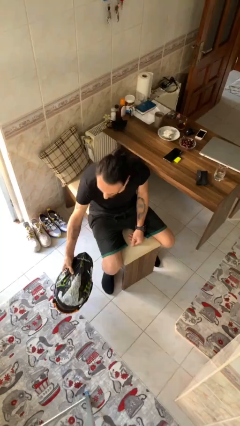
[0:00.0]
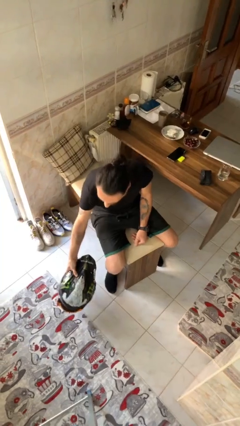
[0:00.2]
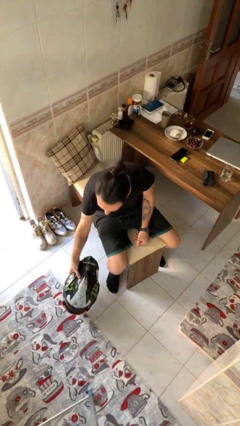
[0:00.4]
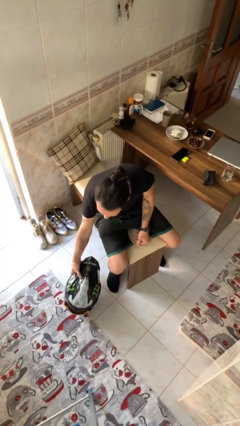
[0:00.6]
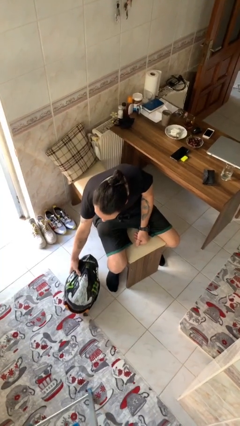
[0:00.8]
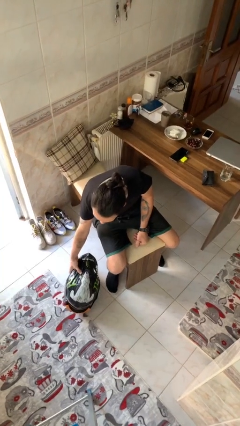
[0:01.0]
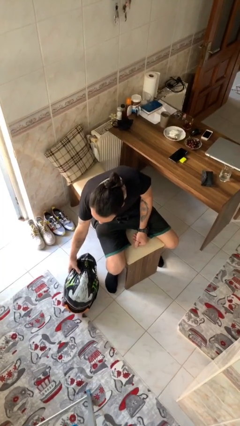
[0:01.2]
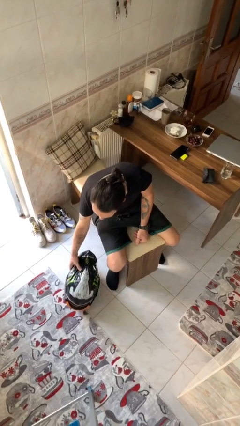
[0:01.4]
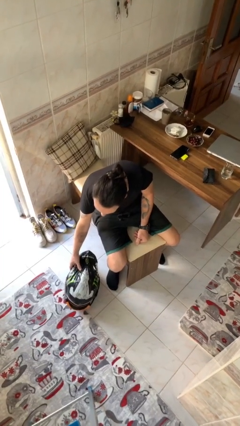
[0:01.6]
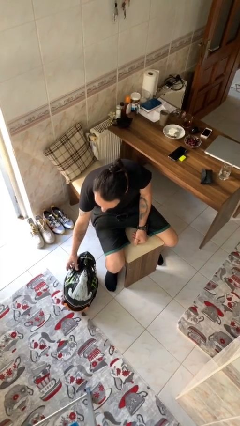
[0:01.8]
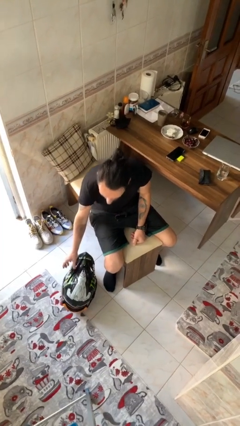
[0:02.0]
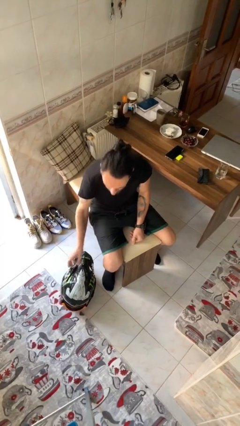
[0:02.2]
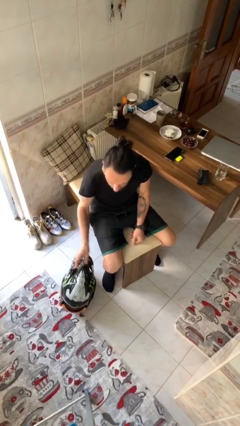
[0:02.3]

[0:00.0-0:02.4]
person puts down object on floor

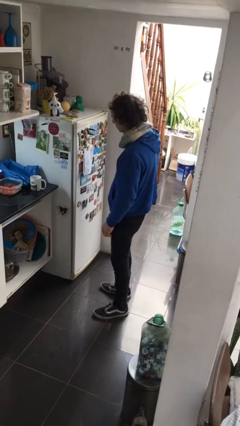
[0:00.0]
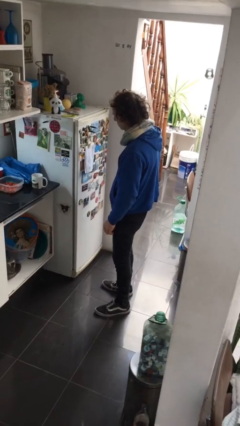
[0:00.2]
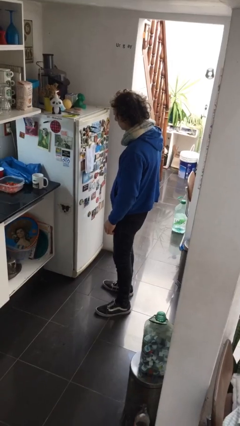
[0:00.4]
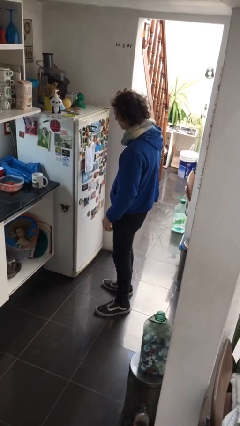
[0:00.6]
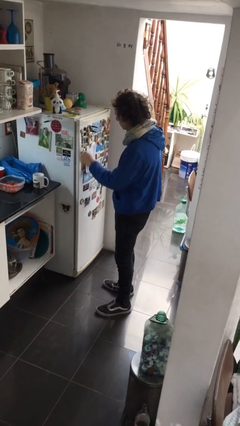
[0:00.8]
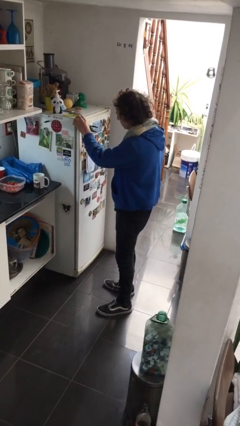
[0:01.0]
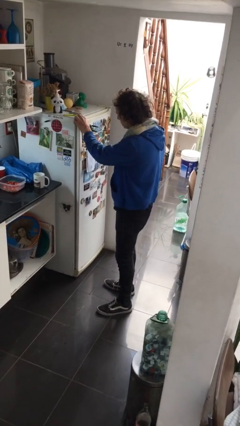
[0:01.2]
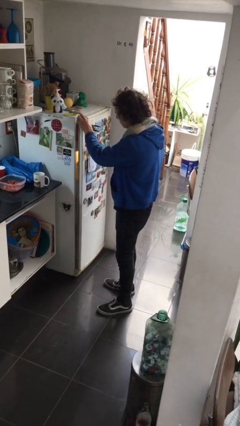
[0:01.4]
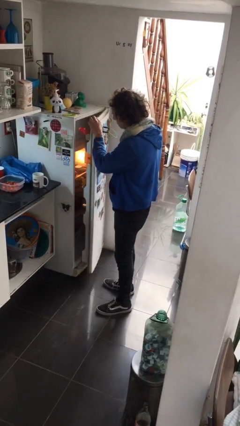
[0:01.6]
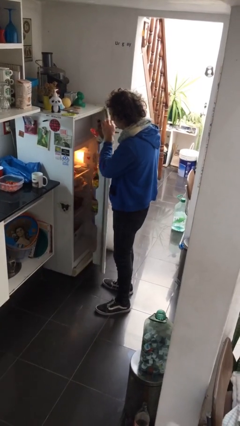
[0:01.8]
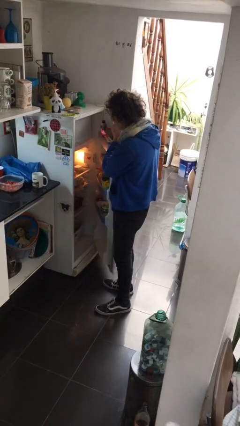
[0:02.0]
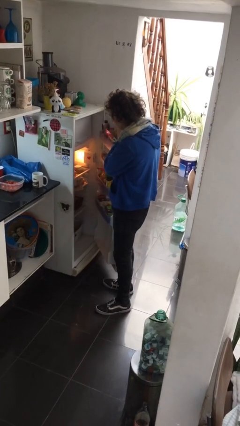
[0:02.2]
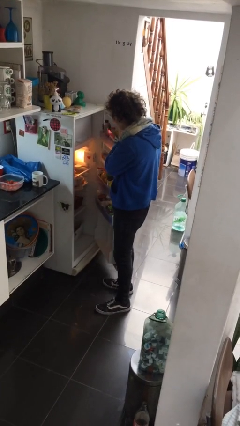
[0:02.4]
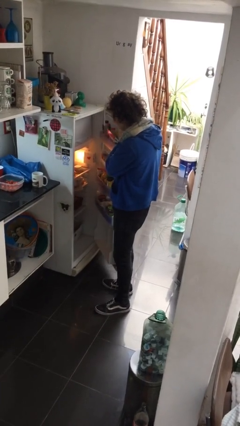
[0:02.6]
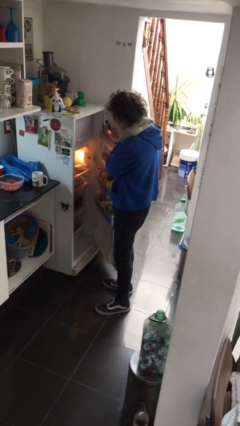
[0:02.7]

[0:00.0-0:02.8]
person opens refrigerator

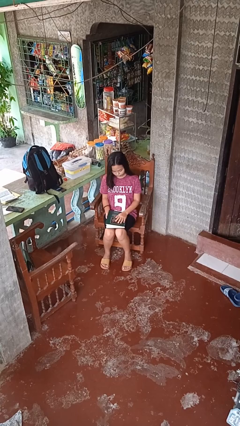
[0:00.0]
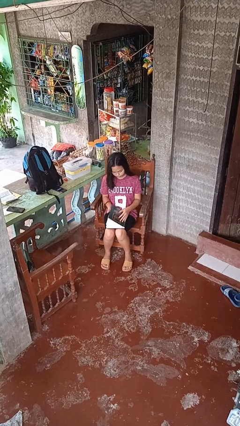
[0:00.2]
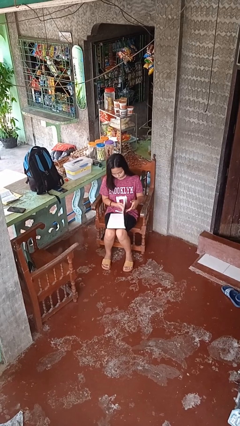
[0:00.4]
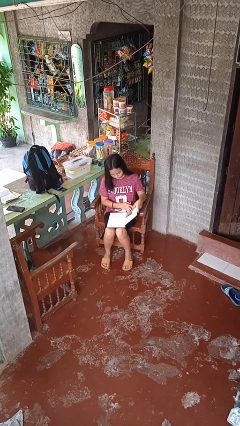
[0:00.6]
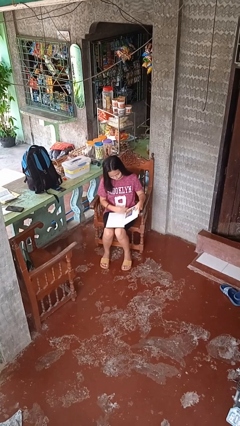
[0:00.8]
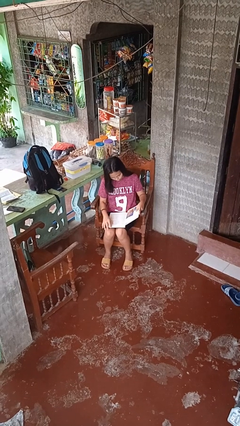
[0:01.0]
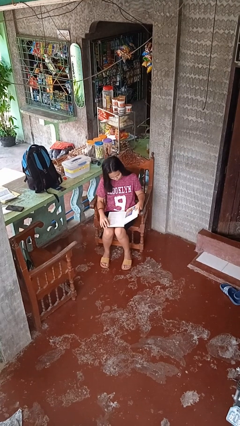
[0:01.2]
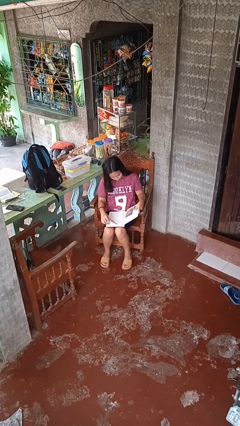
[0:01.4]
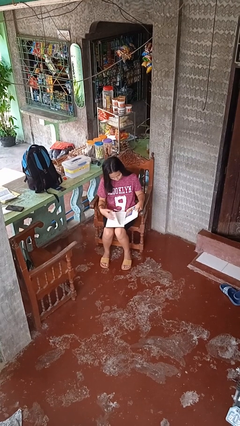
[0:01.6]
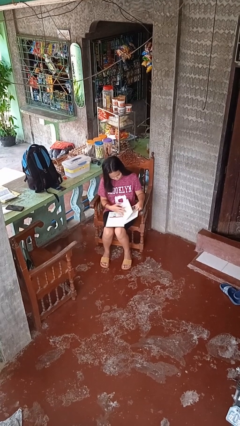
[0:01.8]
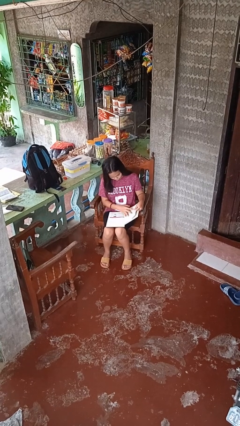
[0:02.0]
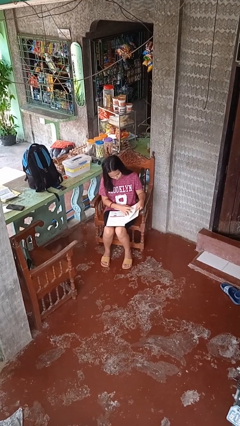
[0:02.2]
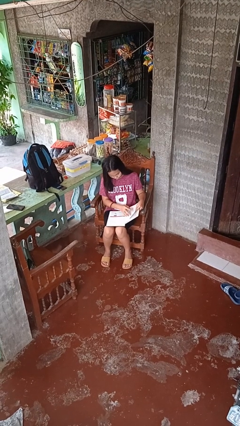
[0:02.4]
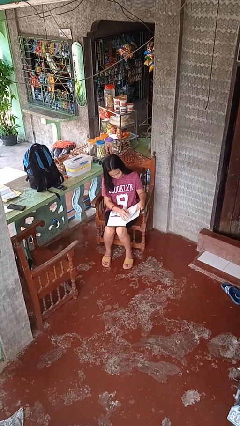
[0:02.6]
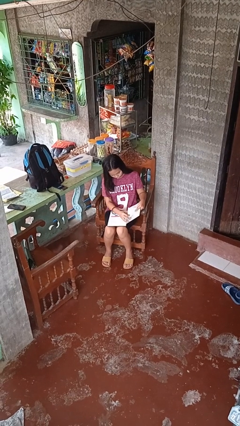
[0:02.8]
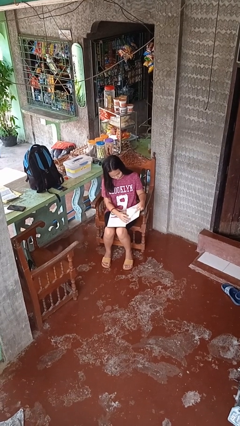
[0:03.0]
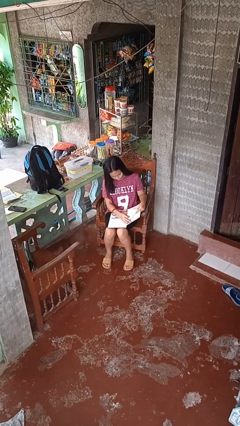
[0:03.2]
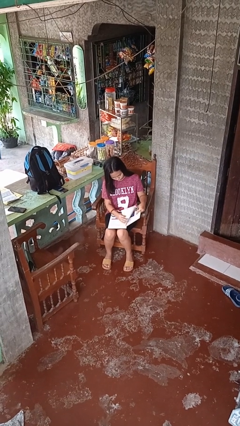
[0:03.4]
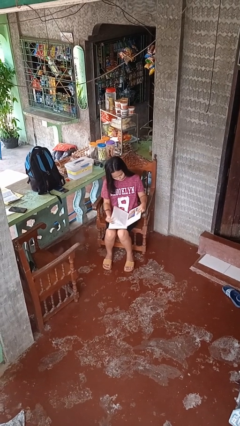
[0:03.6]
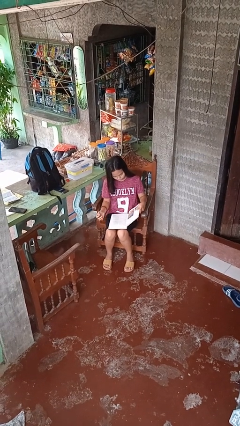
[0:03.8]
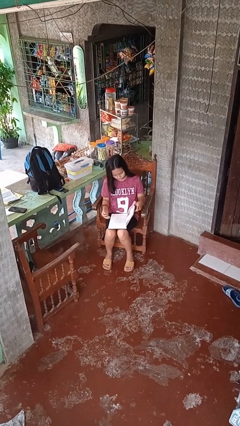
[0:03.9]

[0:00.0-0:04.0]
person reads book

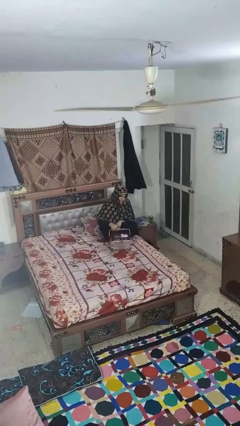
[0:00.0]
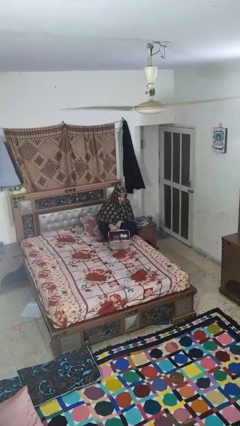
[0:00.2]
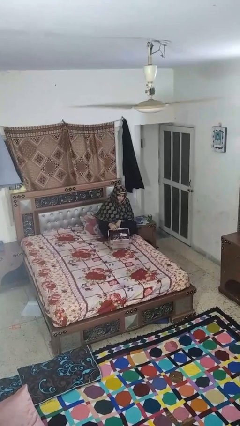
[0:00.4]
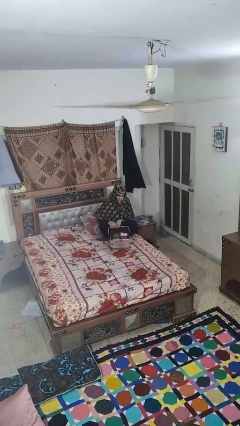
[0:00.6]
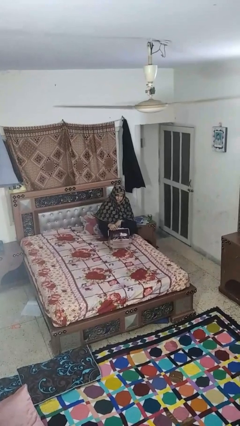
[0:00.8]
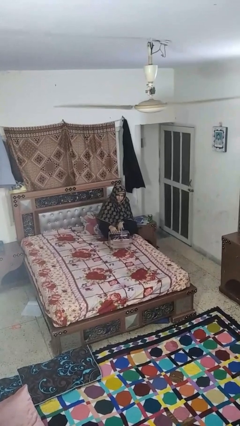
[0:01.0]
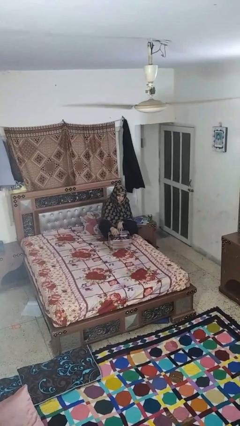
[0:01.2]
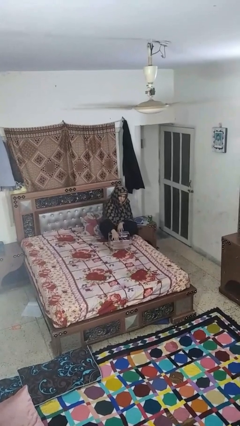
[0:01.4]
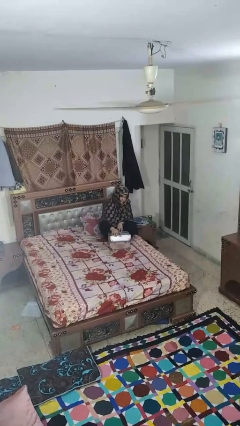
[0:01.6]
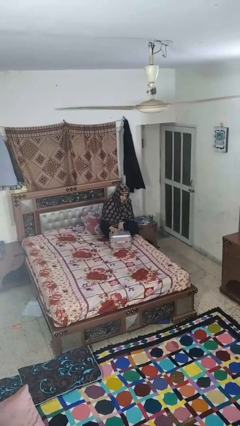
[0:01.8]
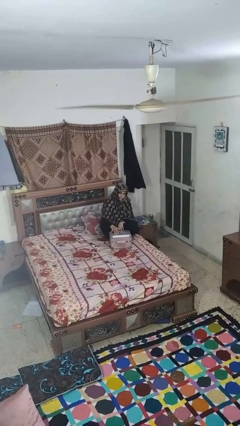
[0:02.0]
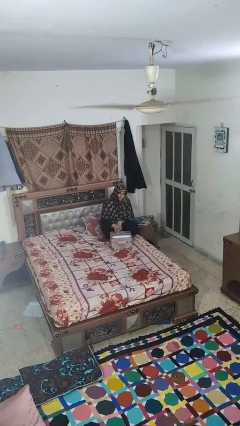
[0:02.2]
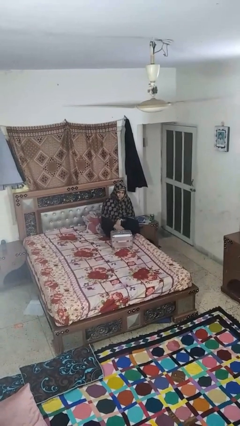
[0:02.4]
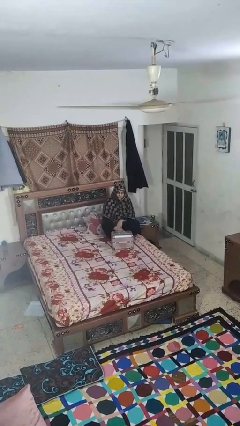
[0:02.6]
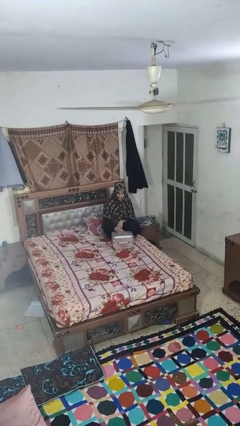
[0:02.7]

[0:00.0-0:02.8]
person closes jewelry box

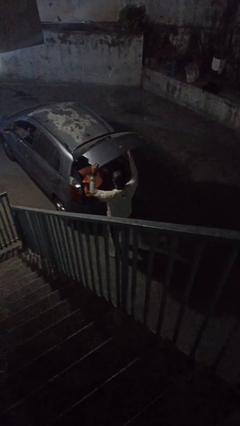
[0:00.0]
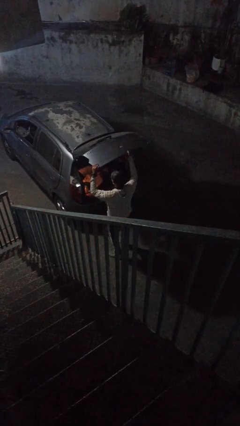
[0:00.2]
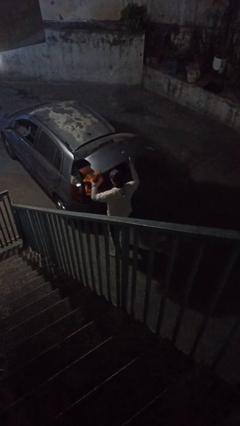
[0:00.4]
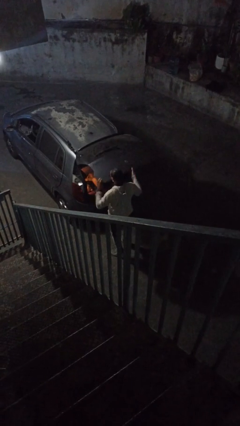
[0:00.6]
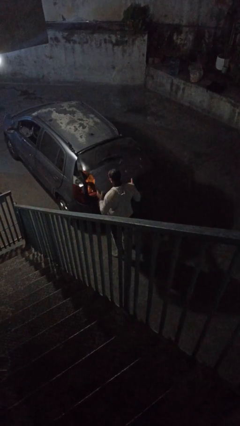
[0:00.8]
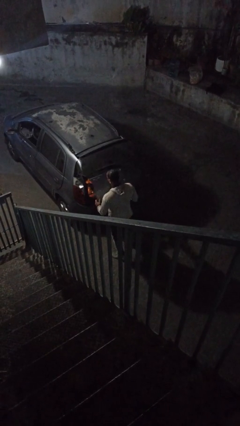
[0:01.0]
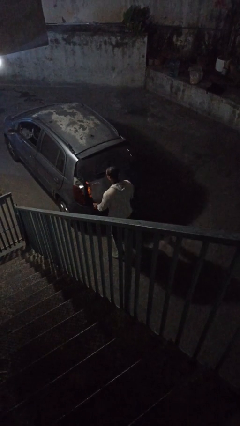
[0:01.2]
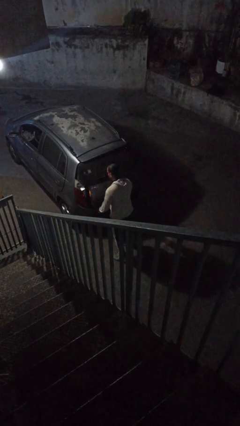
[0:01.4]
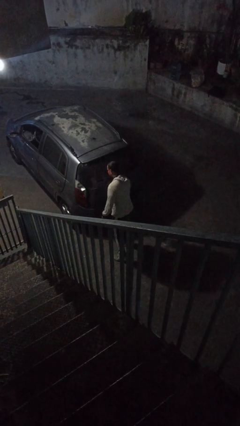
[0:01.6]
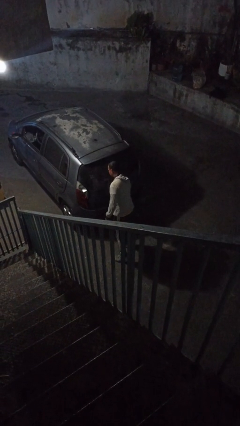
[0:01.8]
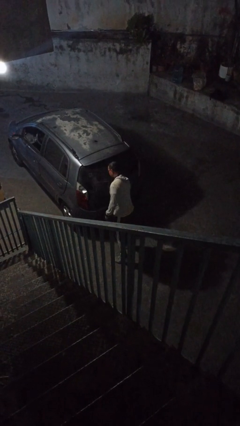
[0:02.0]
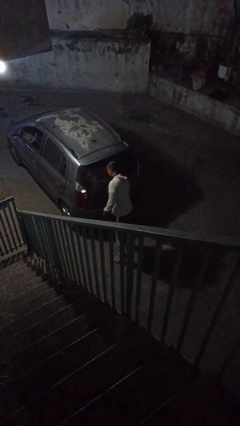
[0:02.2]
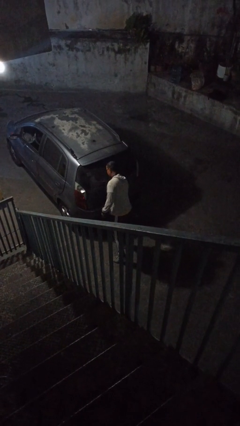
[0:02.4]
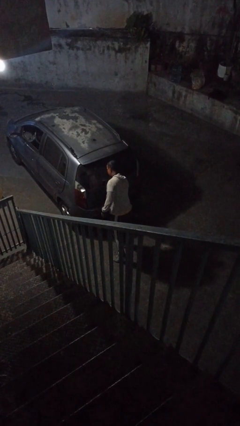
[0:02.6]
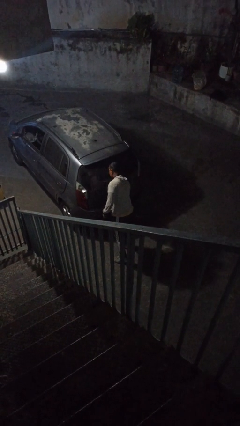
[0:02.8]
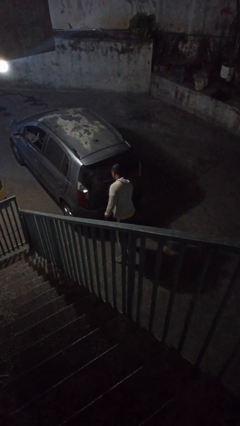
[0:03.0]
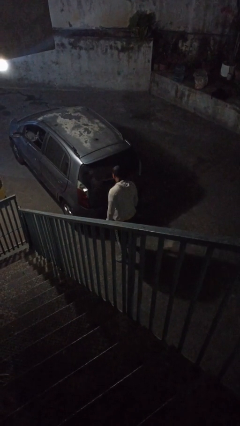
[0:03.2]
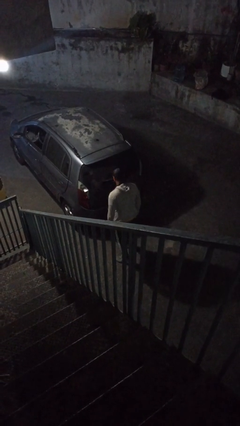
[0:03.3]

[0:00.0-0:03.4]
person closes car trunk

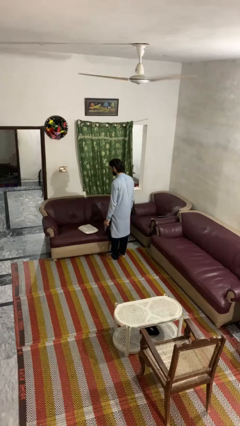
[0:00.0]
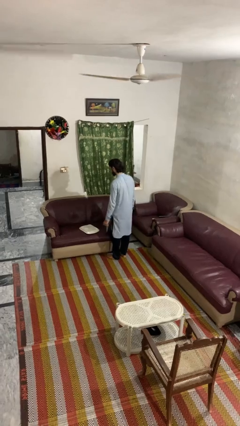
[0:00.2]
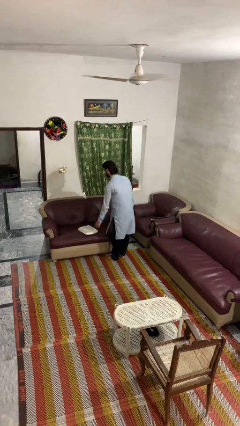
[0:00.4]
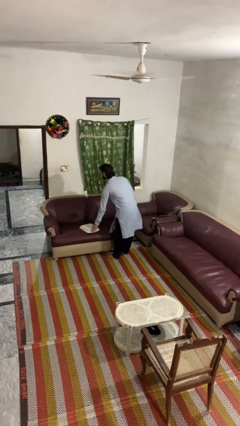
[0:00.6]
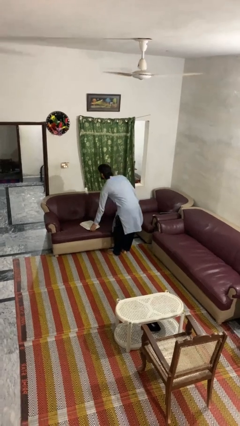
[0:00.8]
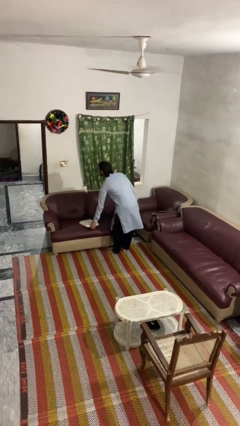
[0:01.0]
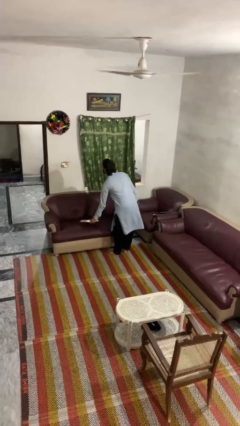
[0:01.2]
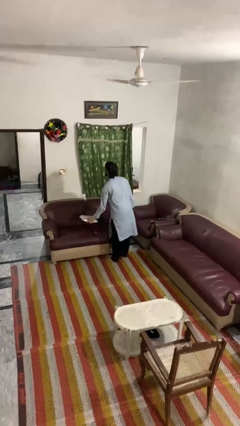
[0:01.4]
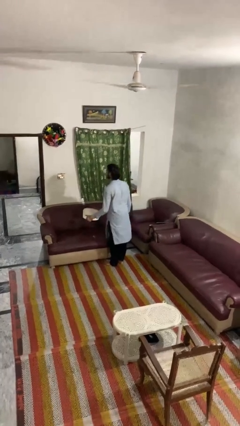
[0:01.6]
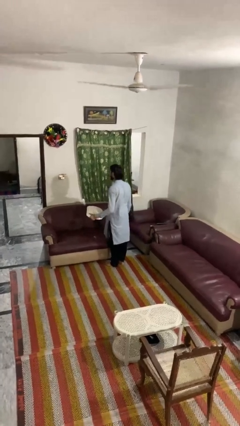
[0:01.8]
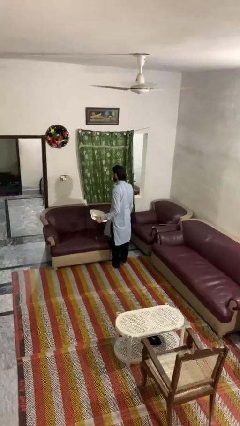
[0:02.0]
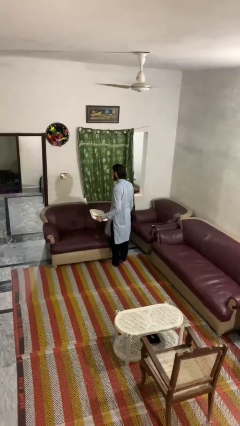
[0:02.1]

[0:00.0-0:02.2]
person picks up object from couch
